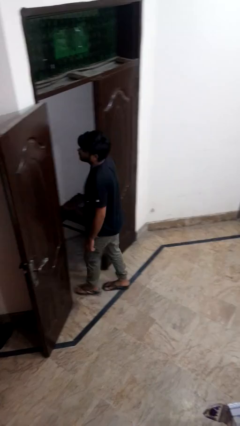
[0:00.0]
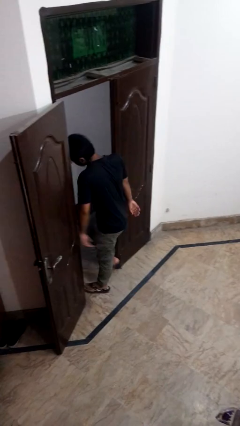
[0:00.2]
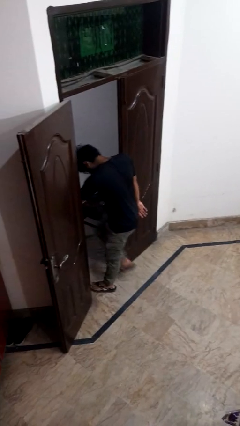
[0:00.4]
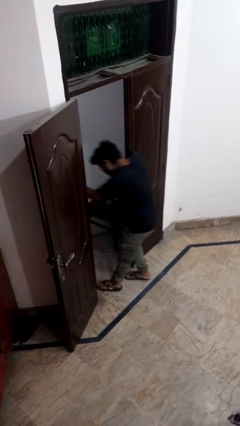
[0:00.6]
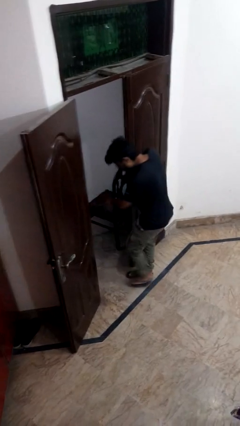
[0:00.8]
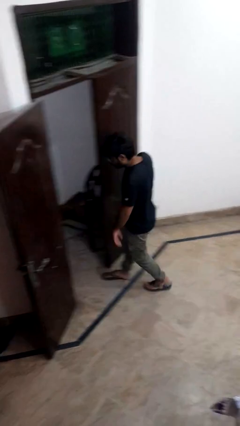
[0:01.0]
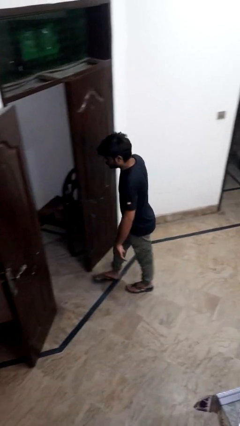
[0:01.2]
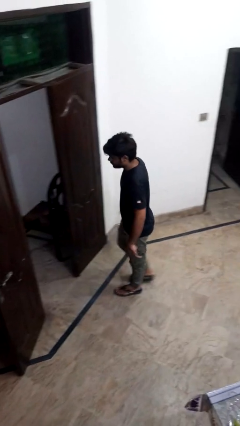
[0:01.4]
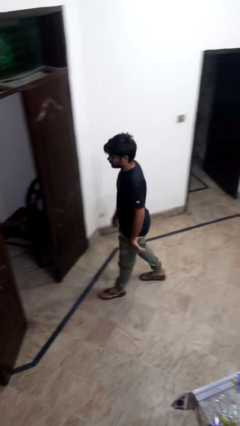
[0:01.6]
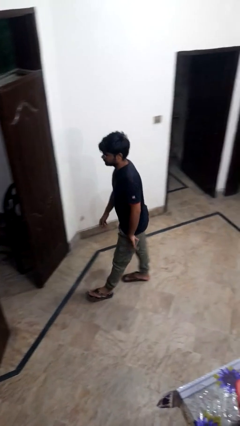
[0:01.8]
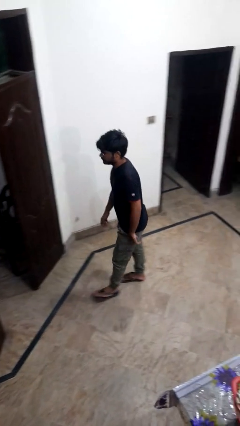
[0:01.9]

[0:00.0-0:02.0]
person bumps into wall

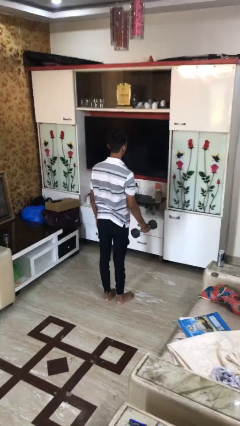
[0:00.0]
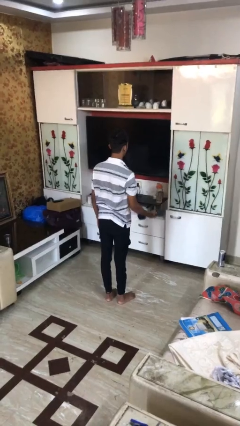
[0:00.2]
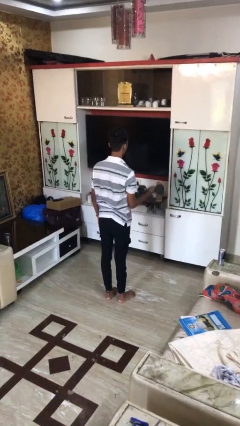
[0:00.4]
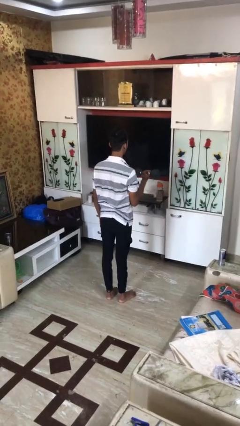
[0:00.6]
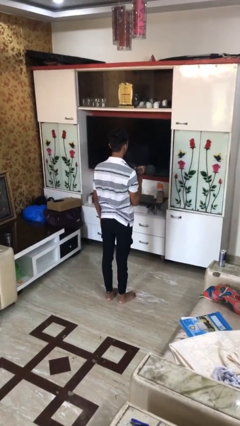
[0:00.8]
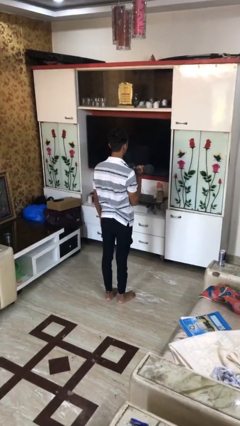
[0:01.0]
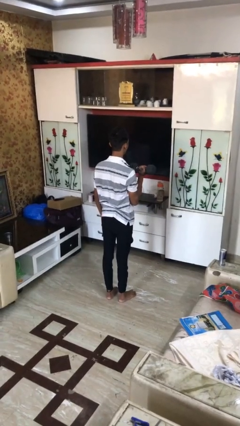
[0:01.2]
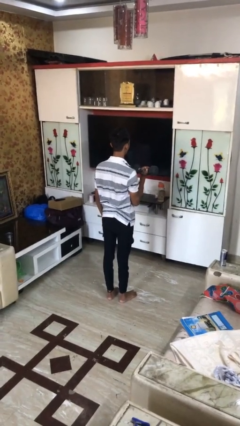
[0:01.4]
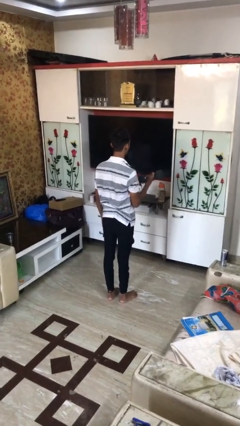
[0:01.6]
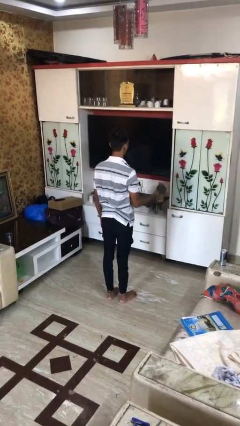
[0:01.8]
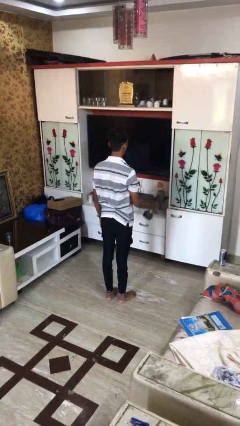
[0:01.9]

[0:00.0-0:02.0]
person lifts dumbbells

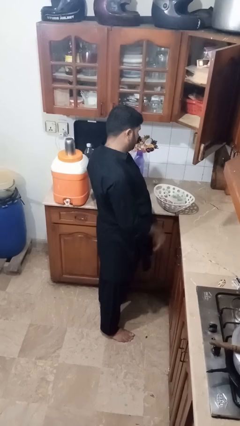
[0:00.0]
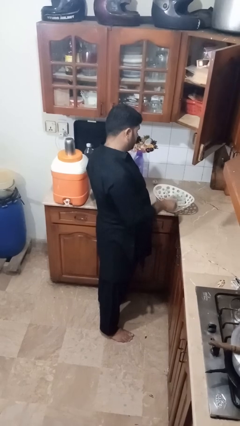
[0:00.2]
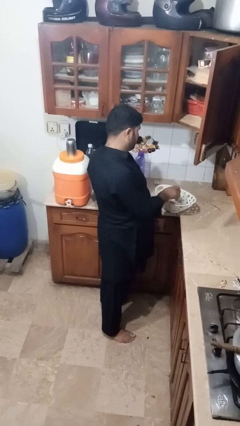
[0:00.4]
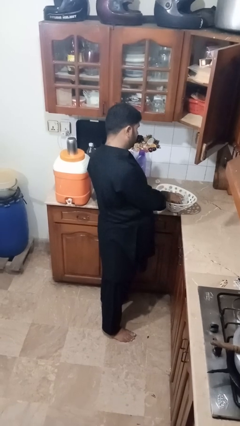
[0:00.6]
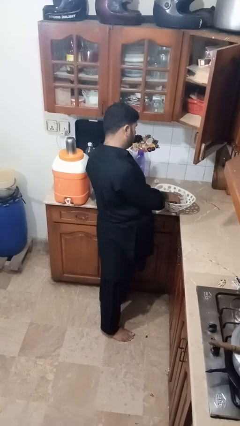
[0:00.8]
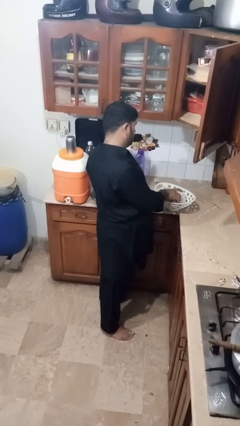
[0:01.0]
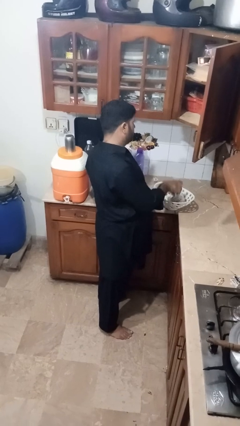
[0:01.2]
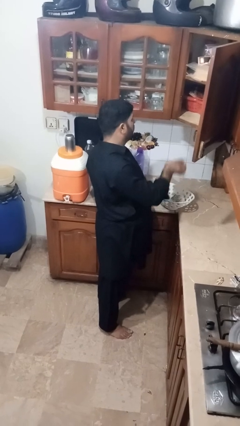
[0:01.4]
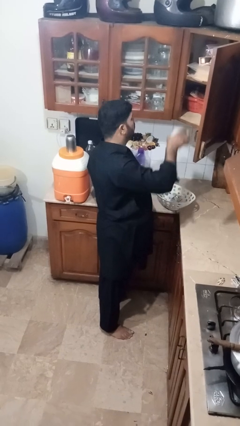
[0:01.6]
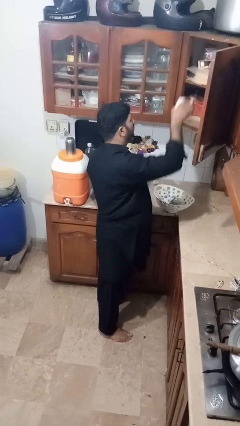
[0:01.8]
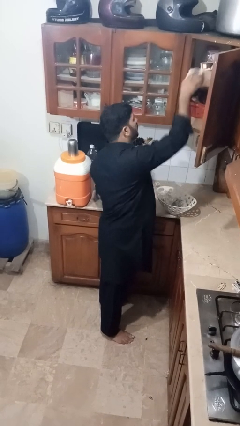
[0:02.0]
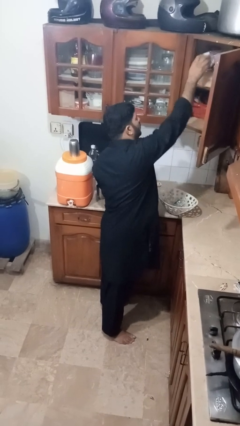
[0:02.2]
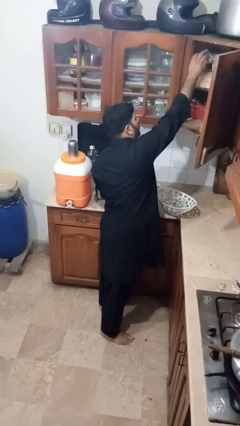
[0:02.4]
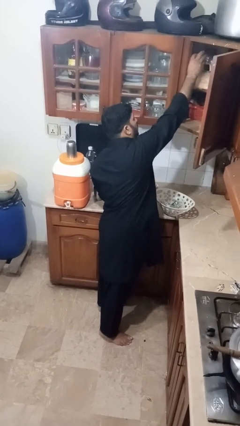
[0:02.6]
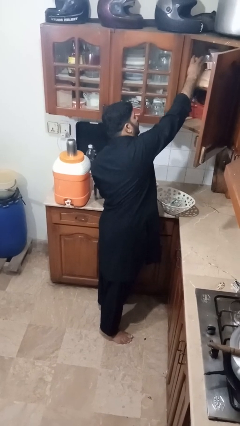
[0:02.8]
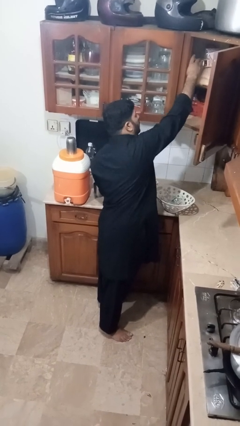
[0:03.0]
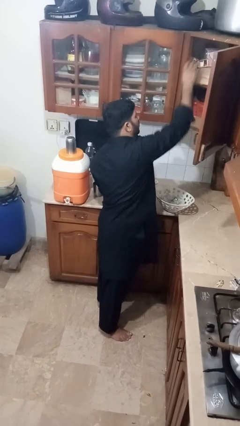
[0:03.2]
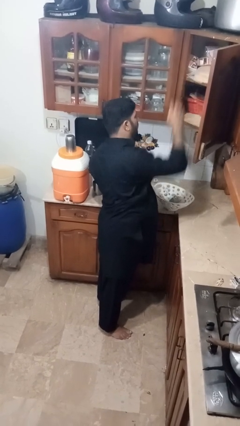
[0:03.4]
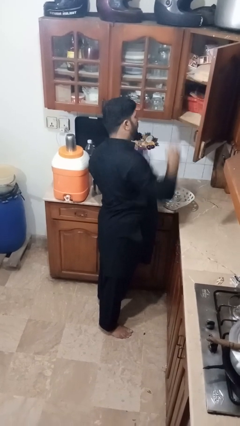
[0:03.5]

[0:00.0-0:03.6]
person loads groceries into cabinet

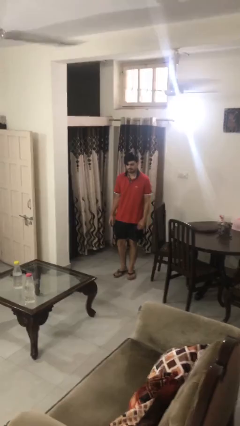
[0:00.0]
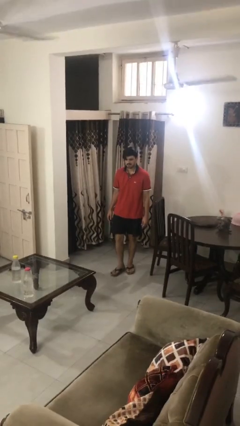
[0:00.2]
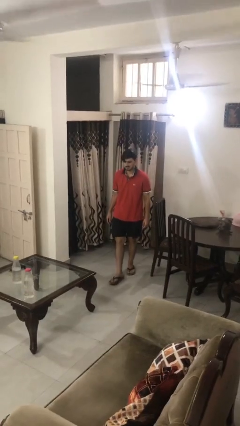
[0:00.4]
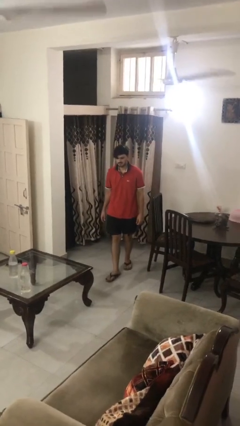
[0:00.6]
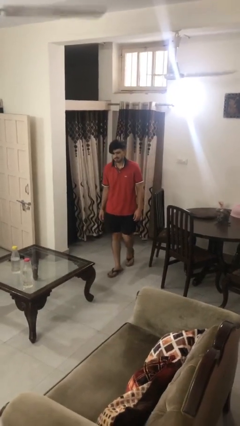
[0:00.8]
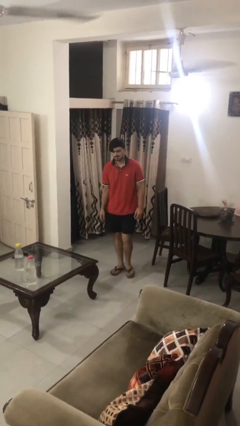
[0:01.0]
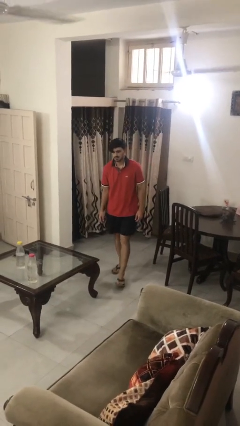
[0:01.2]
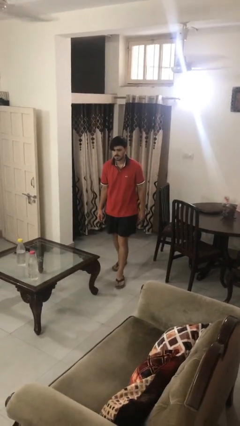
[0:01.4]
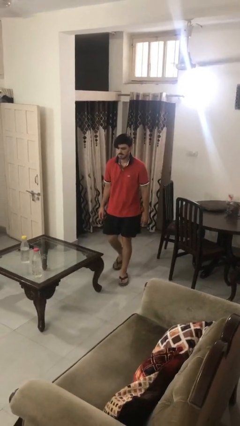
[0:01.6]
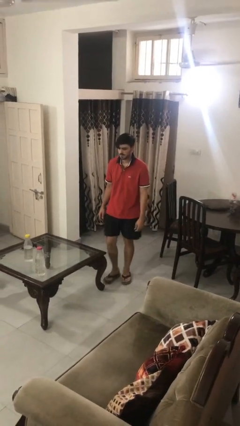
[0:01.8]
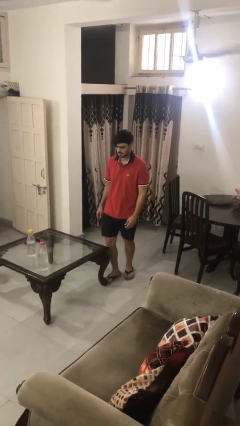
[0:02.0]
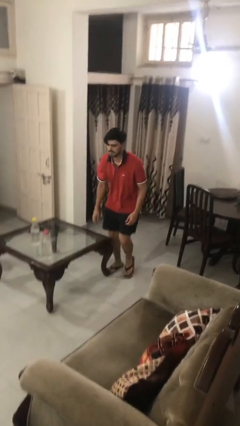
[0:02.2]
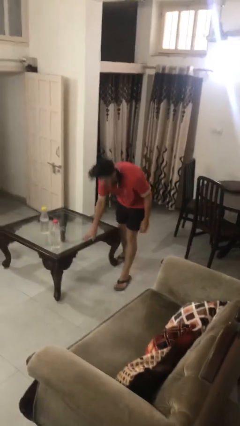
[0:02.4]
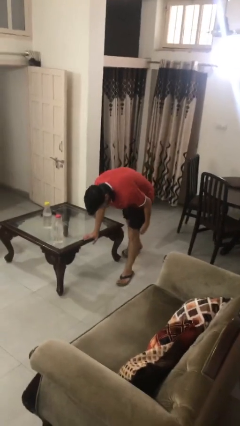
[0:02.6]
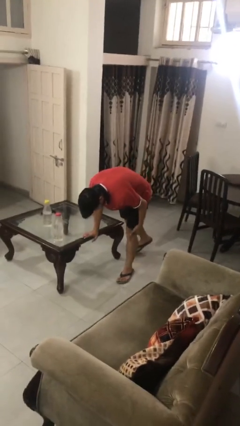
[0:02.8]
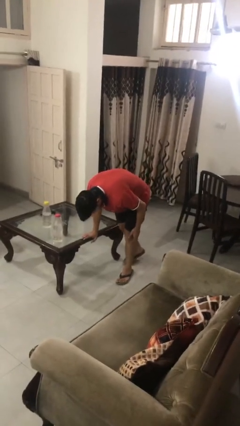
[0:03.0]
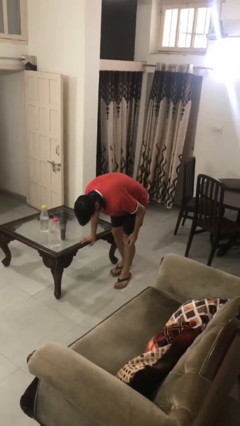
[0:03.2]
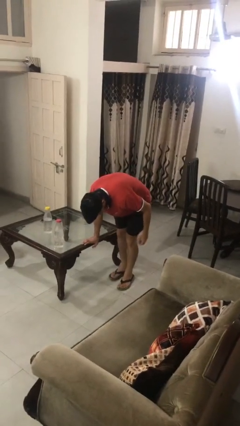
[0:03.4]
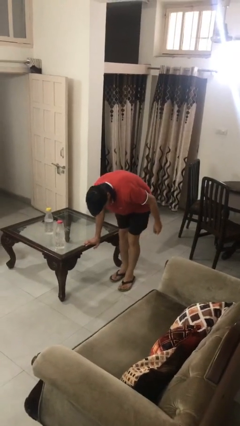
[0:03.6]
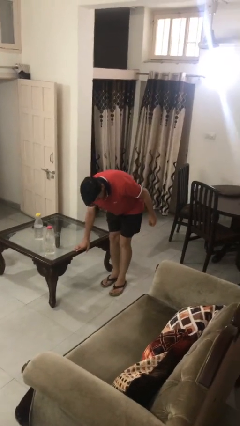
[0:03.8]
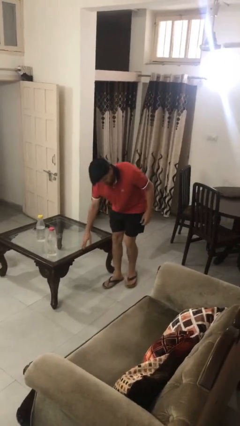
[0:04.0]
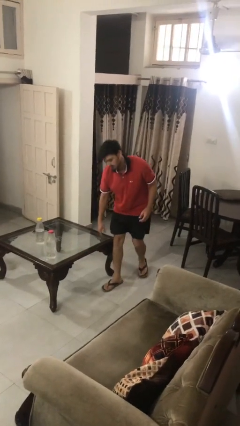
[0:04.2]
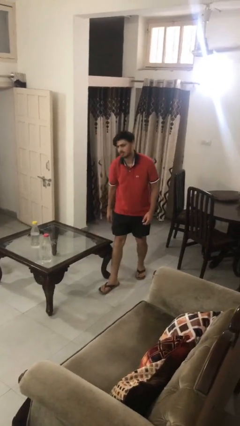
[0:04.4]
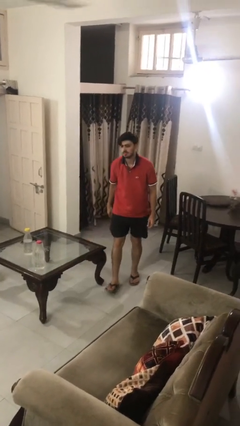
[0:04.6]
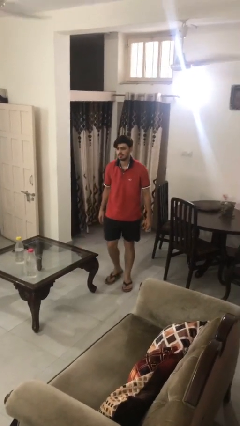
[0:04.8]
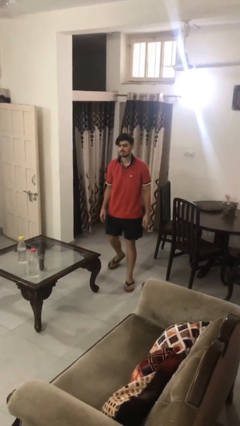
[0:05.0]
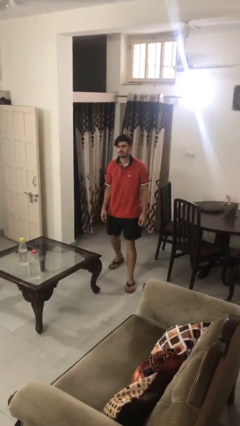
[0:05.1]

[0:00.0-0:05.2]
person bumps into table

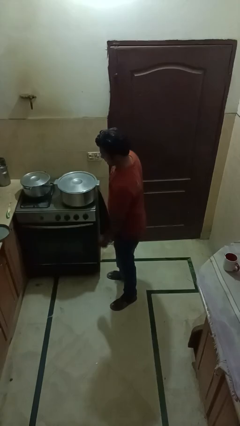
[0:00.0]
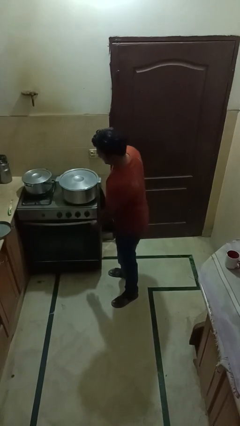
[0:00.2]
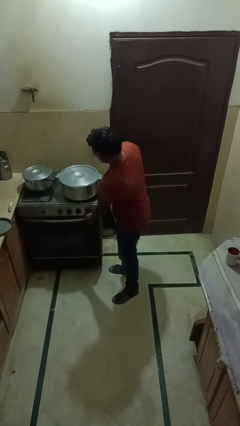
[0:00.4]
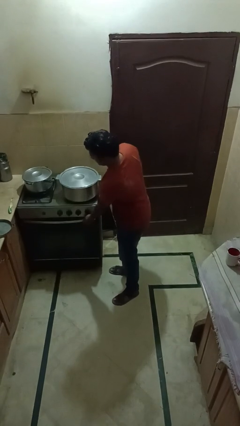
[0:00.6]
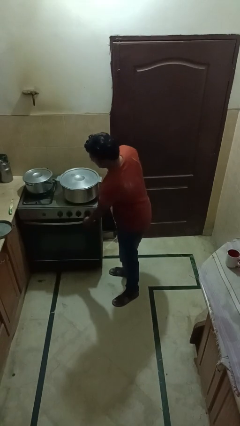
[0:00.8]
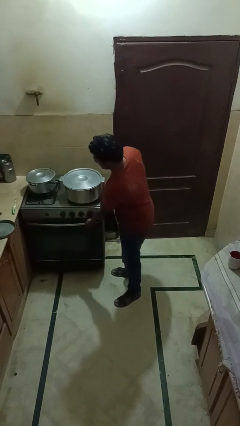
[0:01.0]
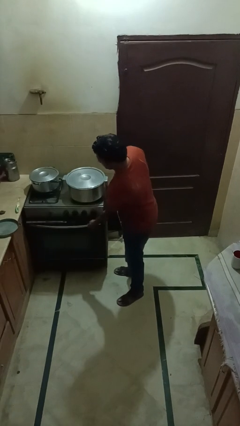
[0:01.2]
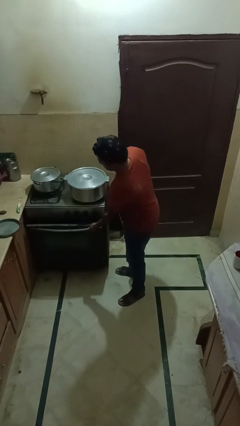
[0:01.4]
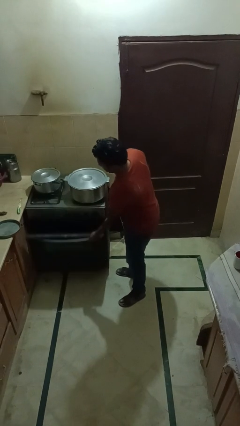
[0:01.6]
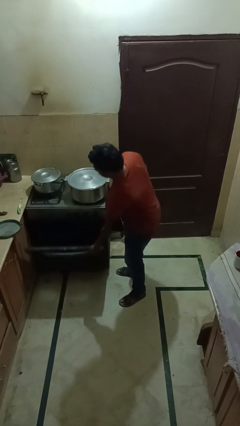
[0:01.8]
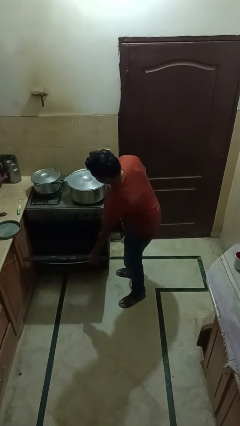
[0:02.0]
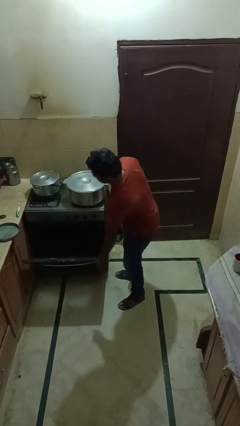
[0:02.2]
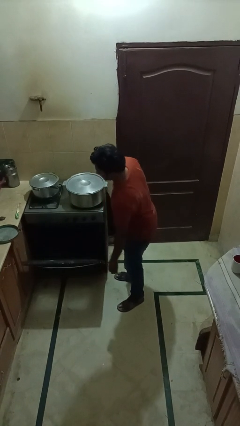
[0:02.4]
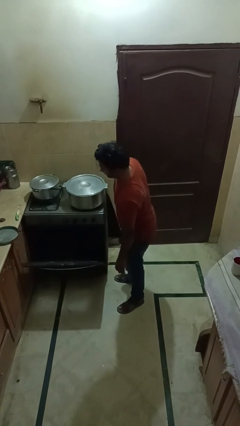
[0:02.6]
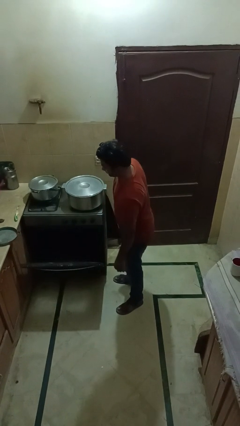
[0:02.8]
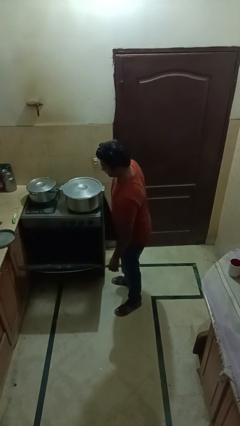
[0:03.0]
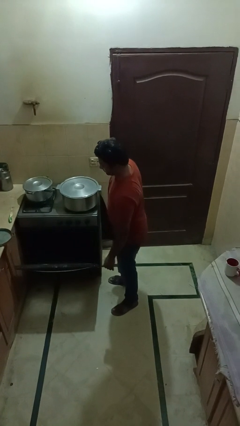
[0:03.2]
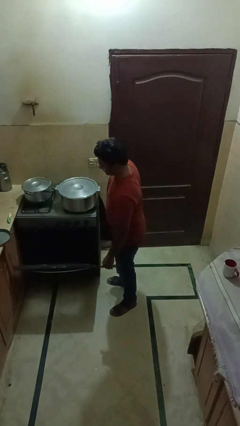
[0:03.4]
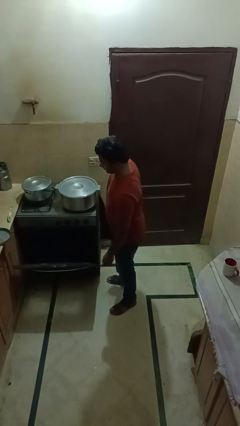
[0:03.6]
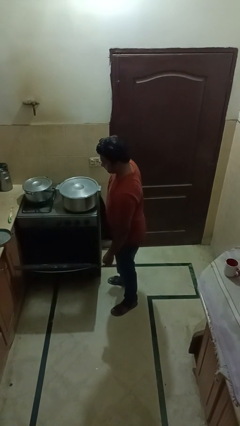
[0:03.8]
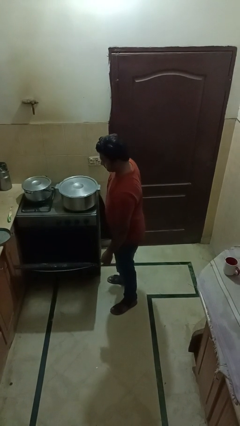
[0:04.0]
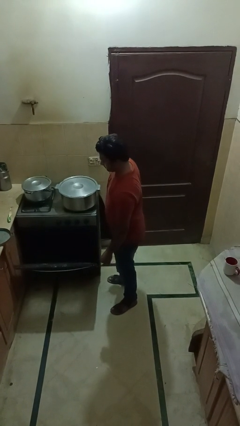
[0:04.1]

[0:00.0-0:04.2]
person opens oven door

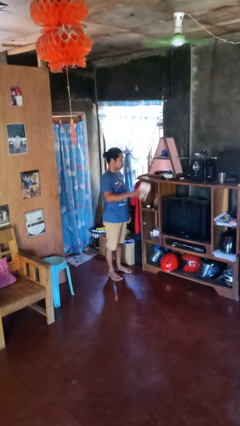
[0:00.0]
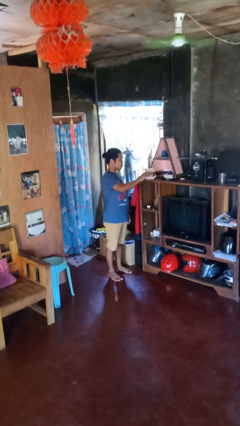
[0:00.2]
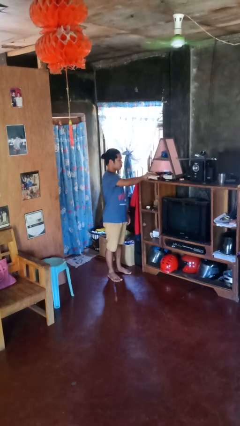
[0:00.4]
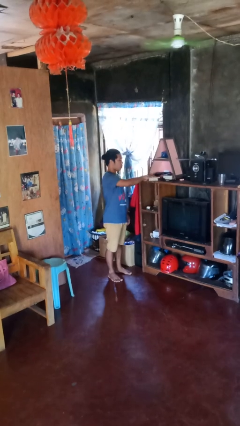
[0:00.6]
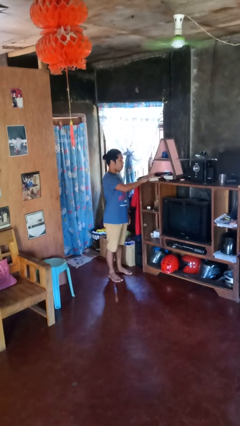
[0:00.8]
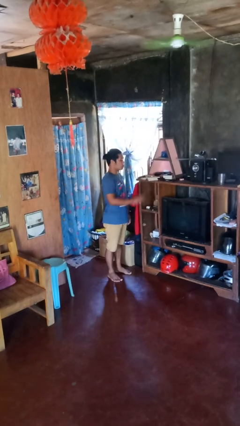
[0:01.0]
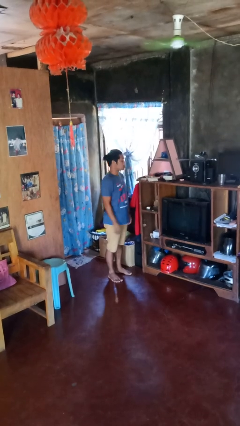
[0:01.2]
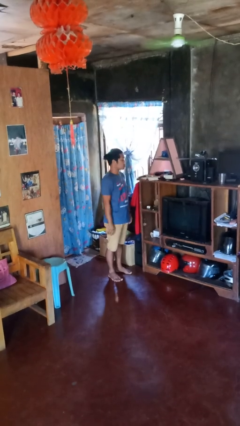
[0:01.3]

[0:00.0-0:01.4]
person puts down object on shelf
